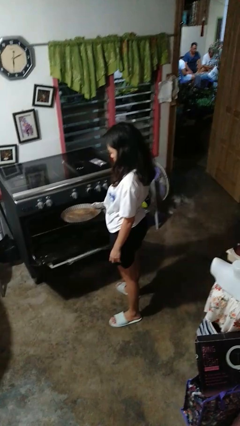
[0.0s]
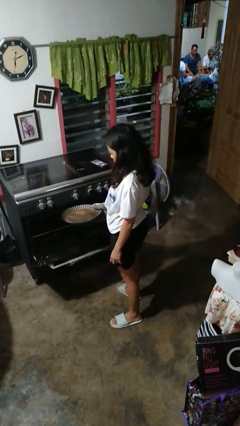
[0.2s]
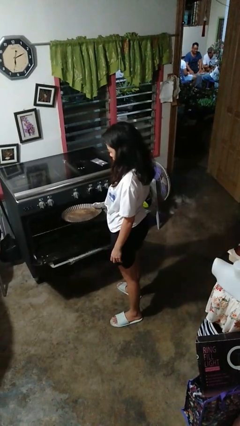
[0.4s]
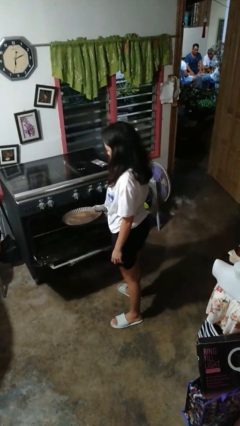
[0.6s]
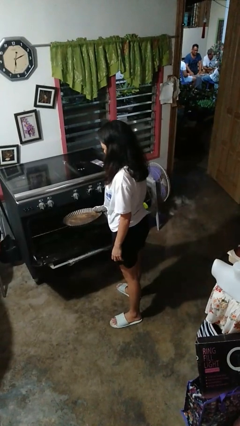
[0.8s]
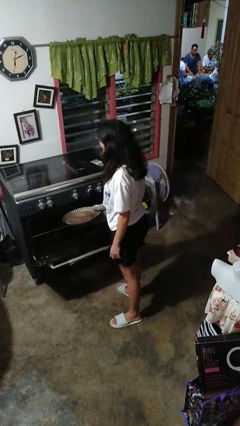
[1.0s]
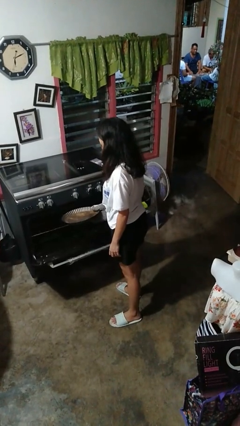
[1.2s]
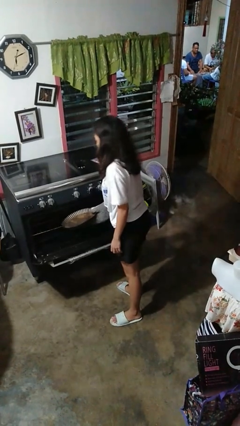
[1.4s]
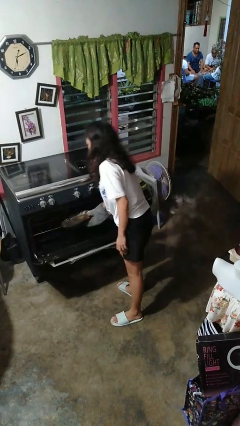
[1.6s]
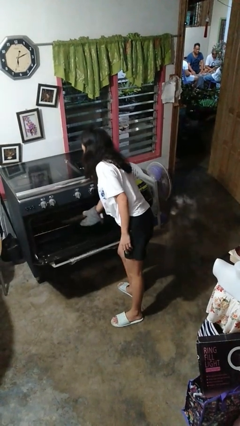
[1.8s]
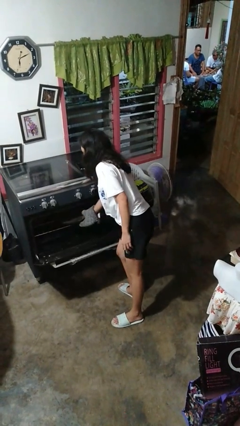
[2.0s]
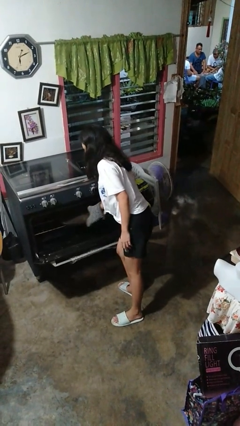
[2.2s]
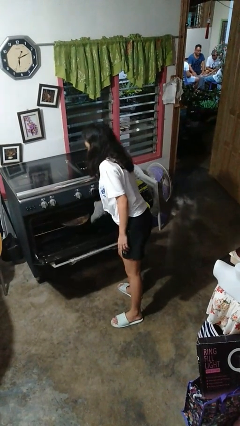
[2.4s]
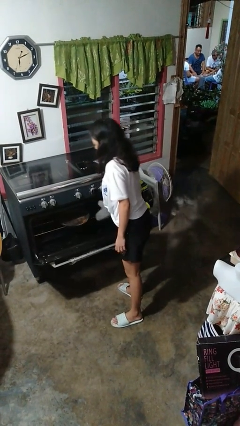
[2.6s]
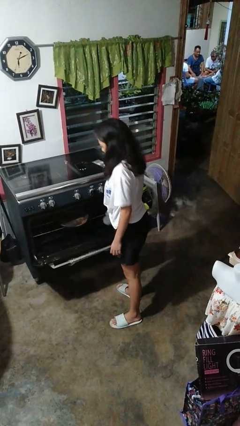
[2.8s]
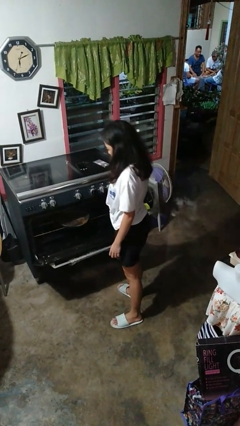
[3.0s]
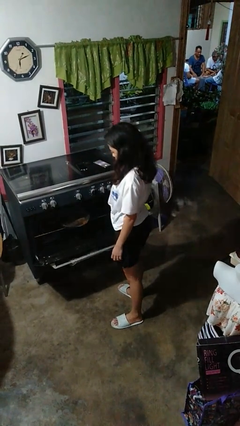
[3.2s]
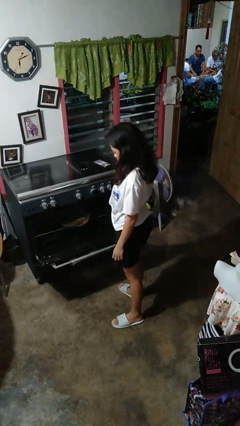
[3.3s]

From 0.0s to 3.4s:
person puts object into oven

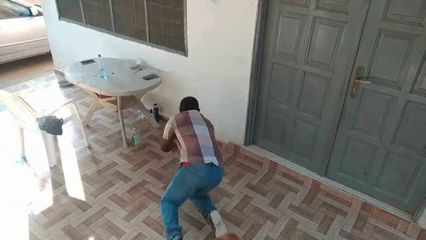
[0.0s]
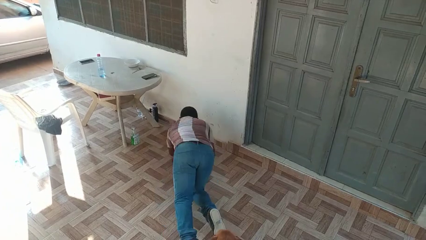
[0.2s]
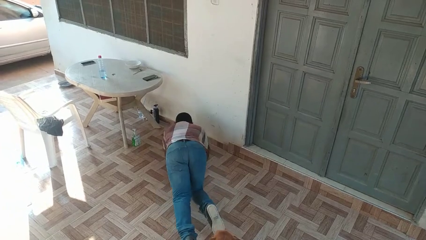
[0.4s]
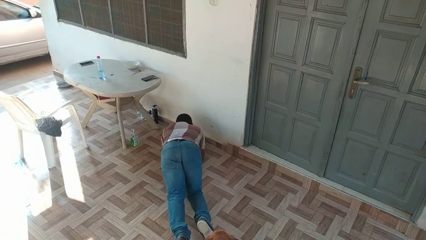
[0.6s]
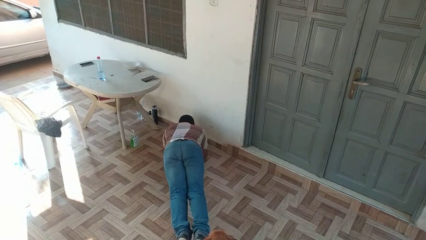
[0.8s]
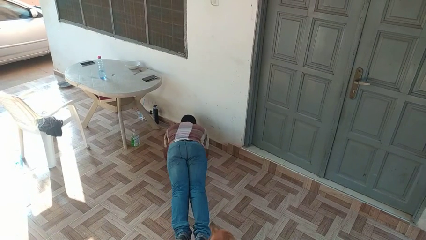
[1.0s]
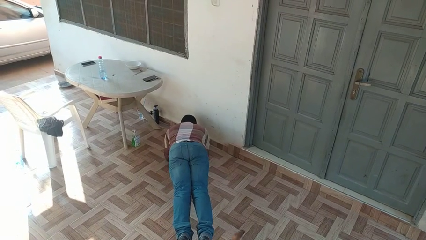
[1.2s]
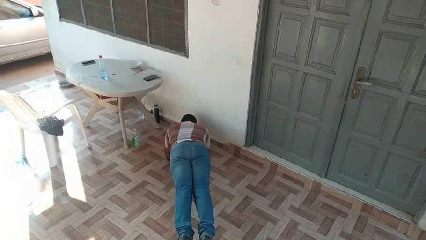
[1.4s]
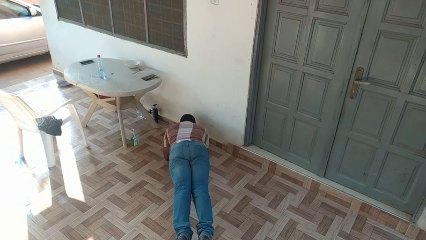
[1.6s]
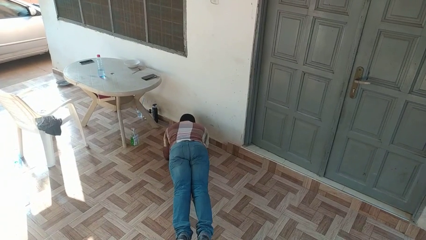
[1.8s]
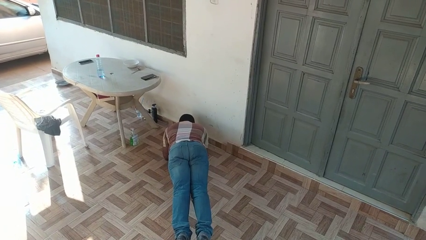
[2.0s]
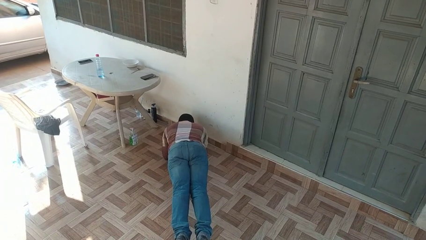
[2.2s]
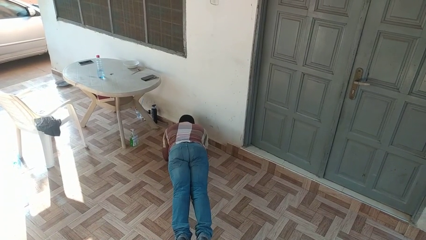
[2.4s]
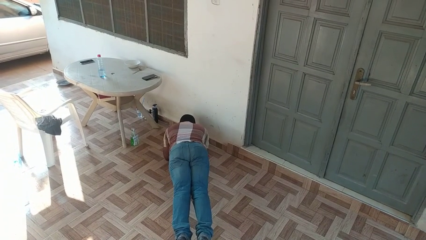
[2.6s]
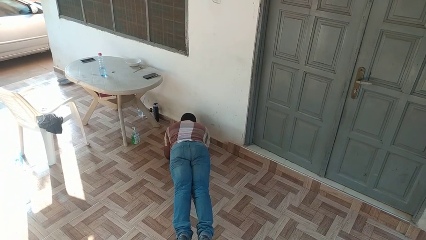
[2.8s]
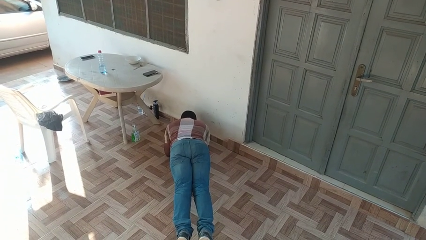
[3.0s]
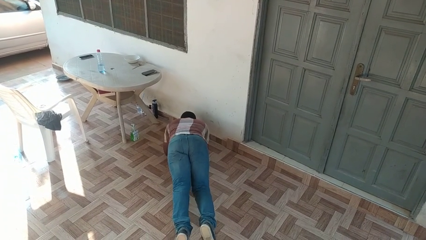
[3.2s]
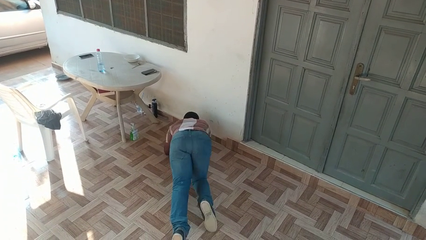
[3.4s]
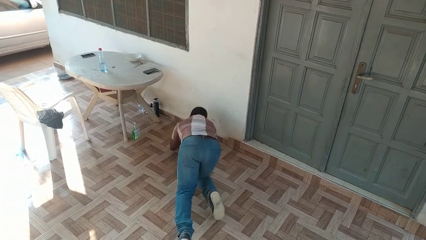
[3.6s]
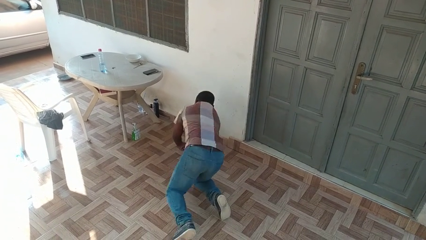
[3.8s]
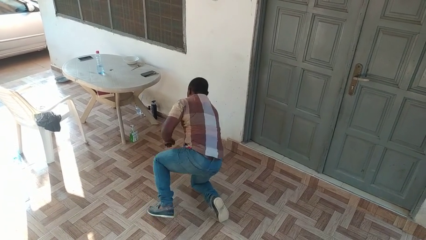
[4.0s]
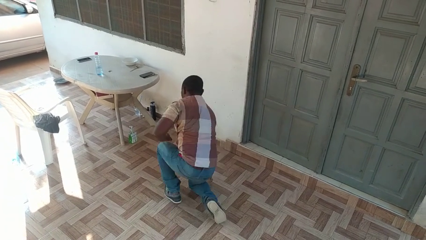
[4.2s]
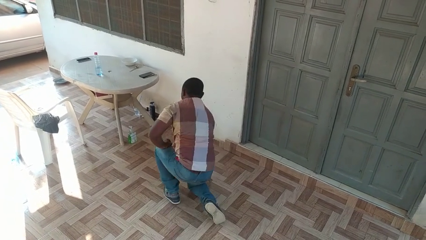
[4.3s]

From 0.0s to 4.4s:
person exercises with plank

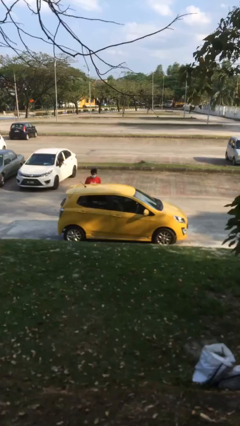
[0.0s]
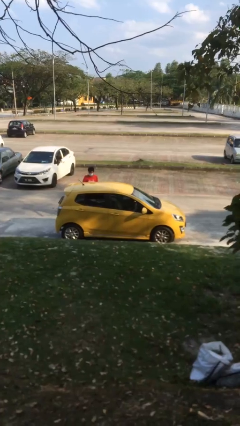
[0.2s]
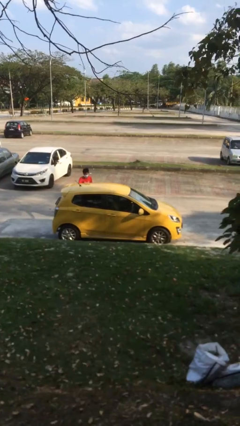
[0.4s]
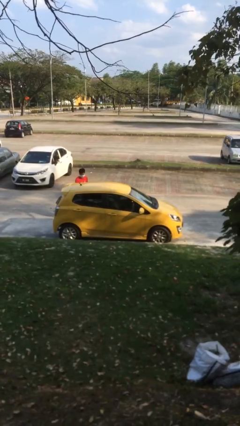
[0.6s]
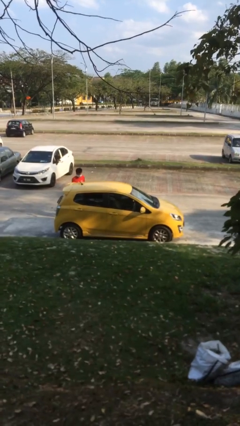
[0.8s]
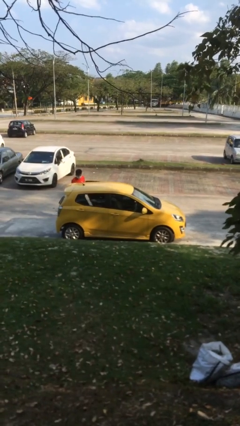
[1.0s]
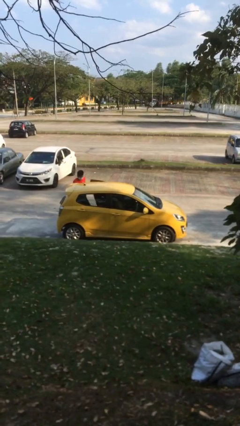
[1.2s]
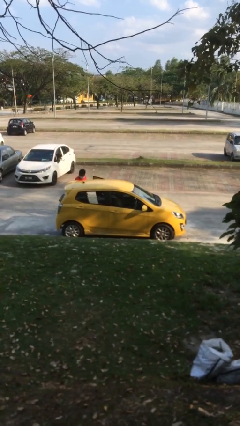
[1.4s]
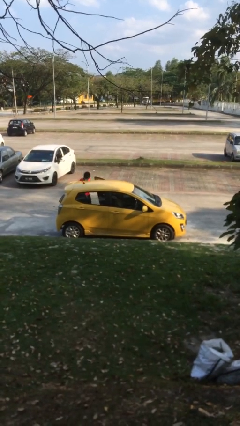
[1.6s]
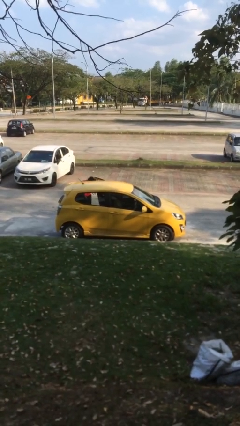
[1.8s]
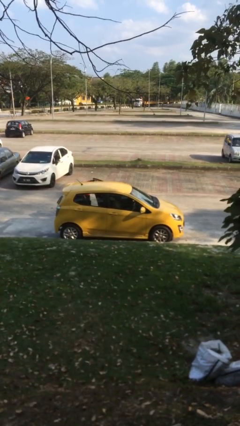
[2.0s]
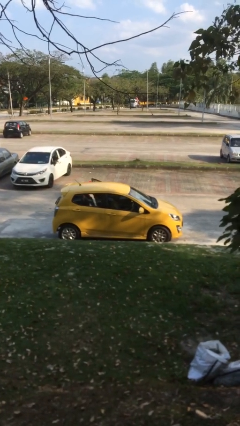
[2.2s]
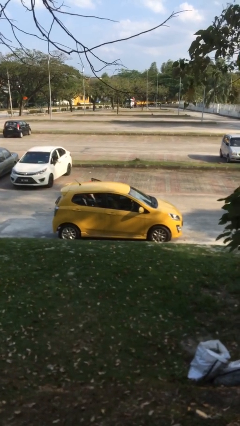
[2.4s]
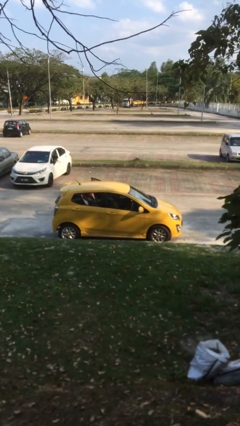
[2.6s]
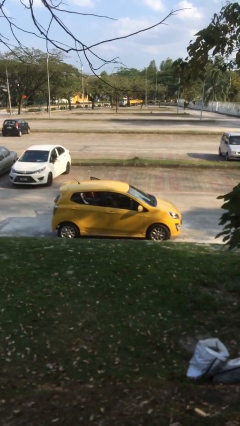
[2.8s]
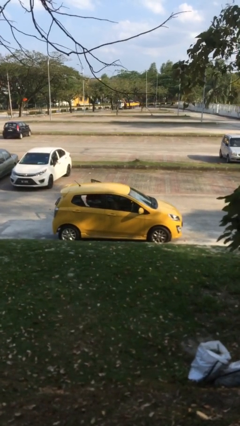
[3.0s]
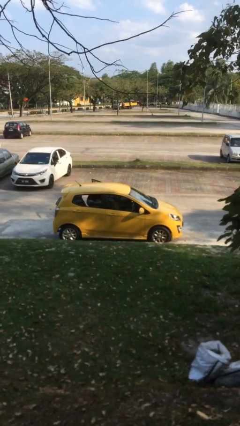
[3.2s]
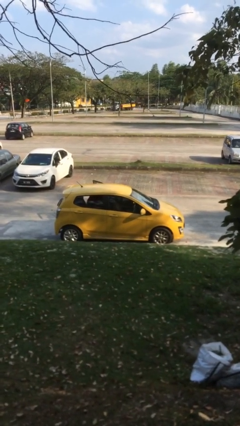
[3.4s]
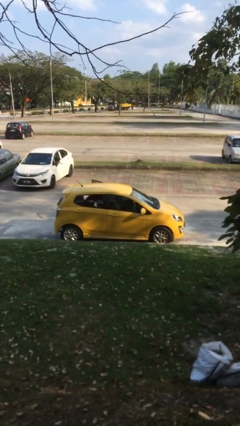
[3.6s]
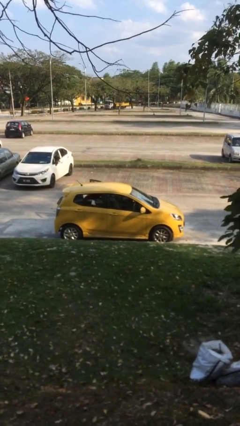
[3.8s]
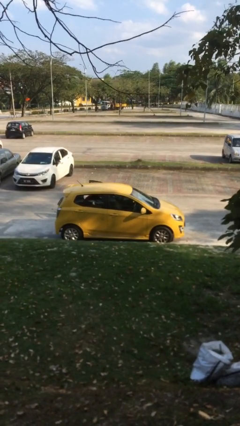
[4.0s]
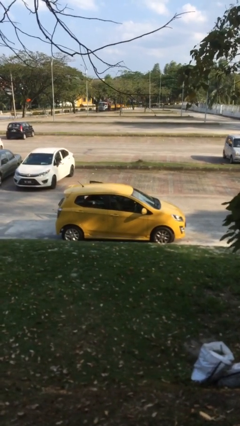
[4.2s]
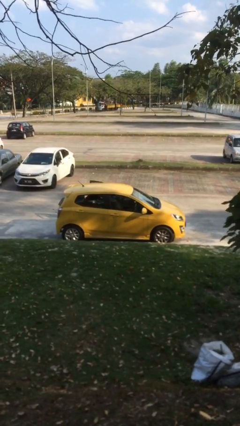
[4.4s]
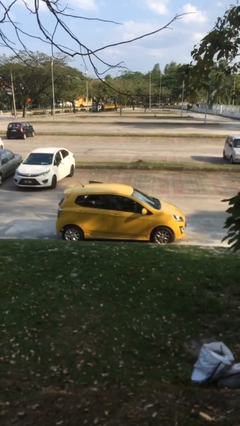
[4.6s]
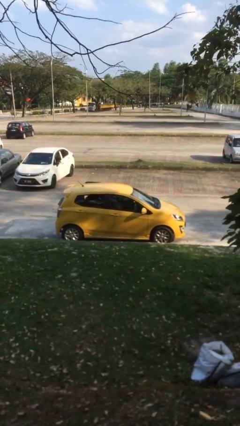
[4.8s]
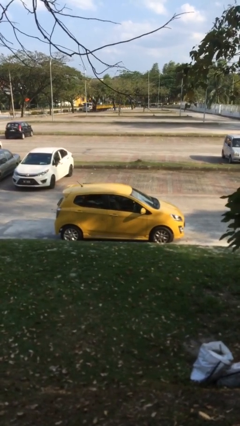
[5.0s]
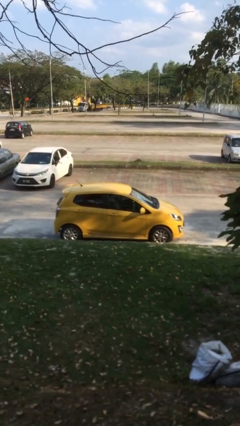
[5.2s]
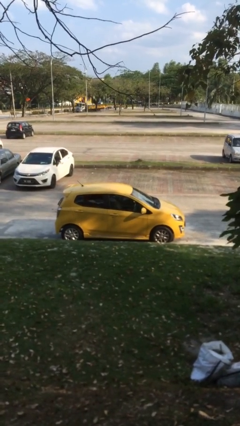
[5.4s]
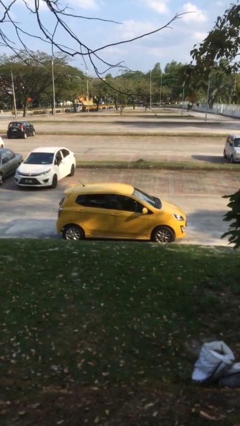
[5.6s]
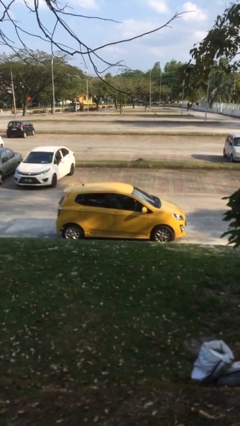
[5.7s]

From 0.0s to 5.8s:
car picks up person

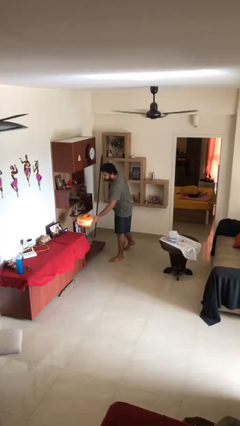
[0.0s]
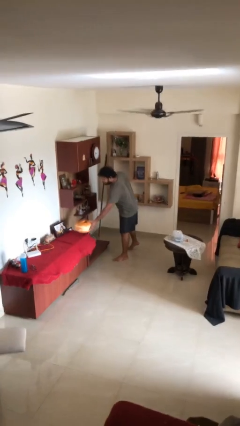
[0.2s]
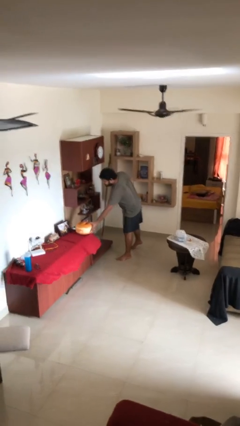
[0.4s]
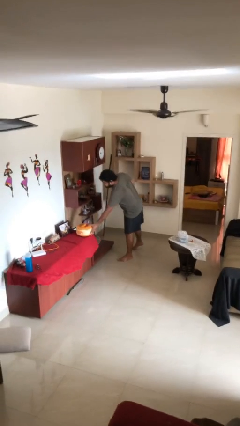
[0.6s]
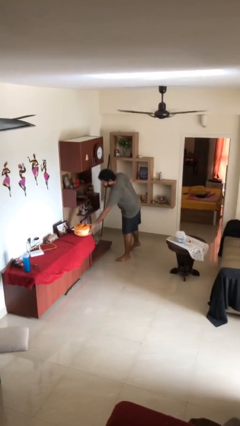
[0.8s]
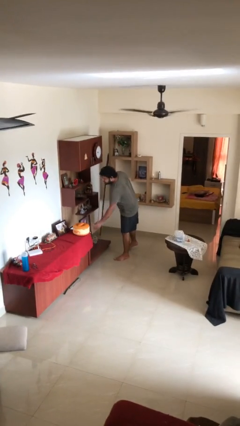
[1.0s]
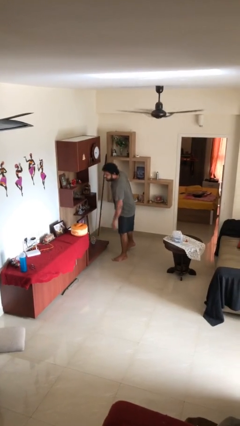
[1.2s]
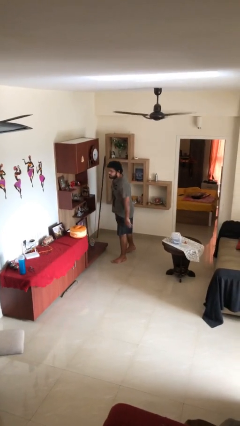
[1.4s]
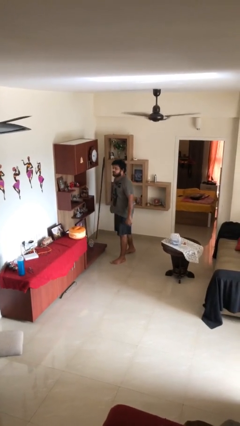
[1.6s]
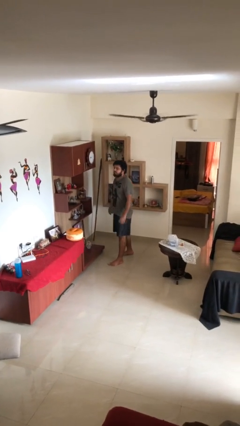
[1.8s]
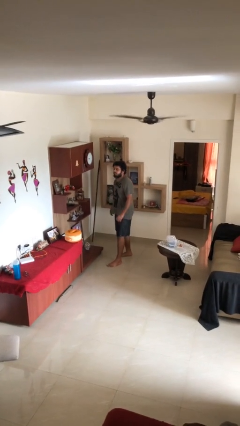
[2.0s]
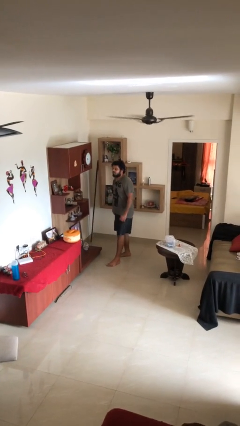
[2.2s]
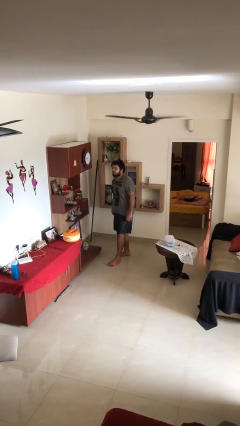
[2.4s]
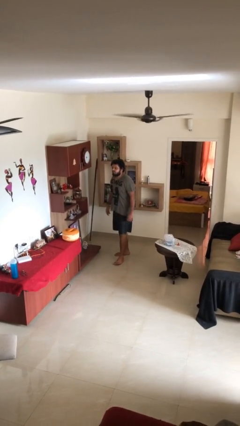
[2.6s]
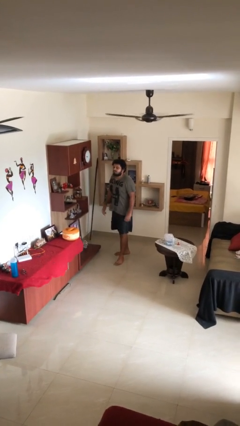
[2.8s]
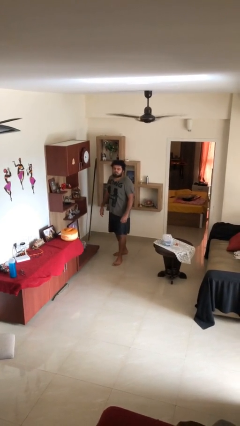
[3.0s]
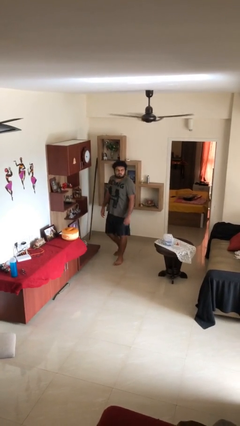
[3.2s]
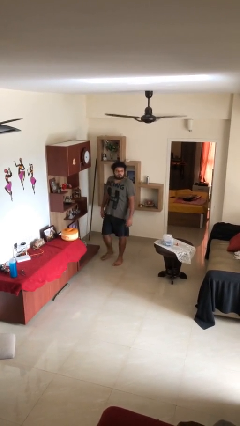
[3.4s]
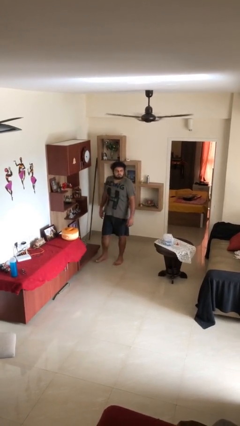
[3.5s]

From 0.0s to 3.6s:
person puts down object on table

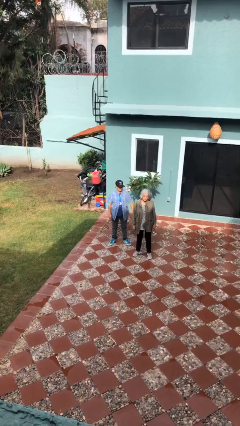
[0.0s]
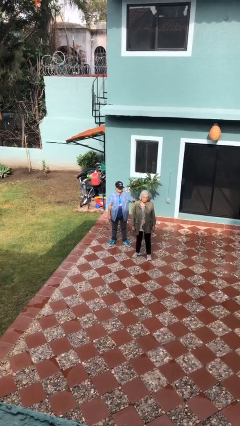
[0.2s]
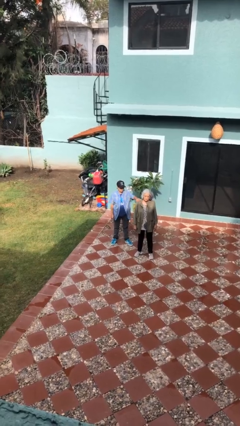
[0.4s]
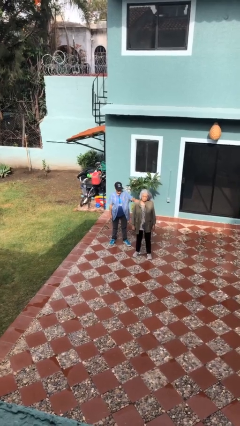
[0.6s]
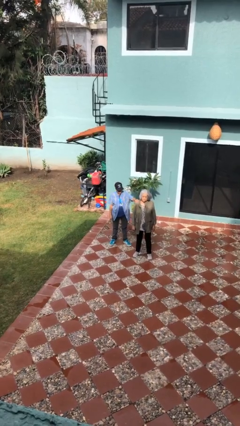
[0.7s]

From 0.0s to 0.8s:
person grabs person by shoulder
